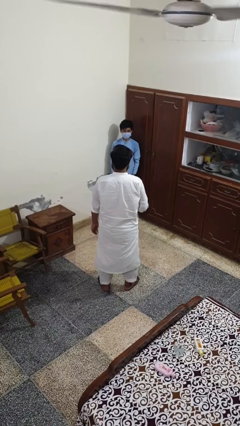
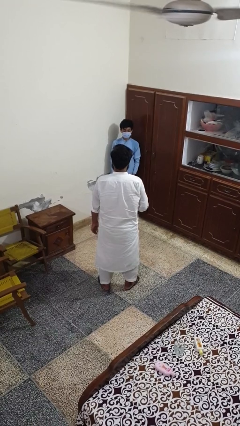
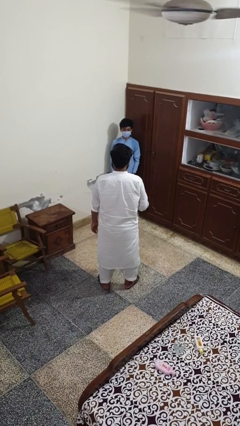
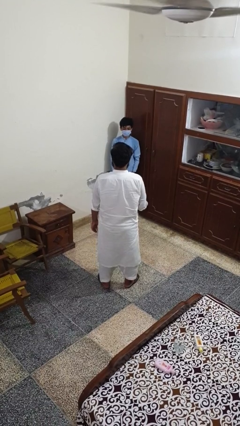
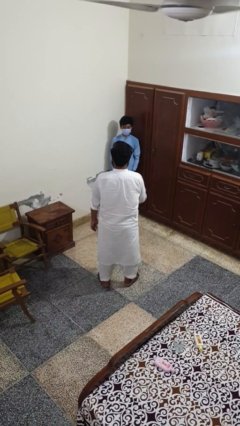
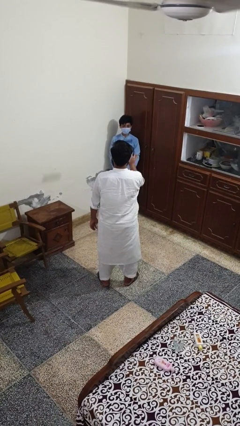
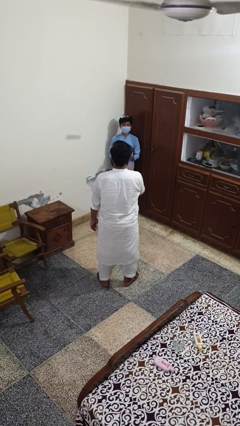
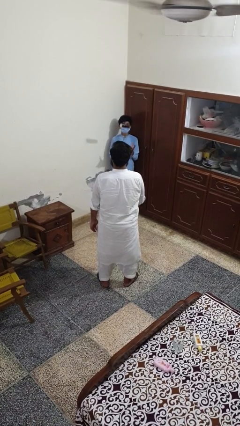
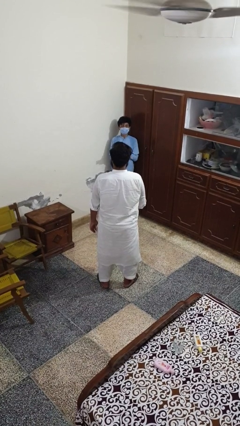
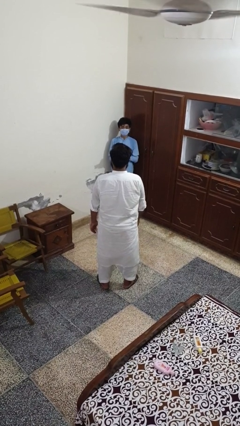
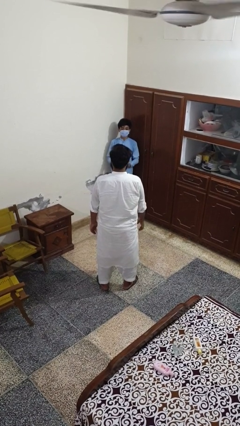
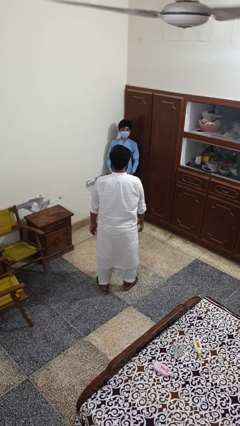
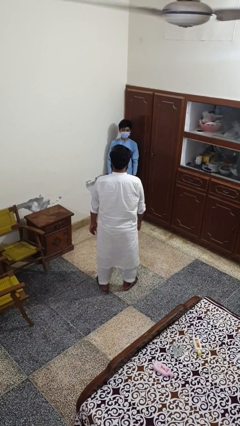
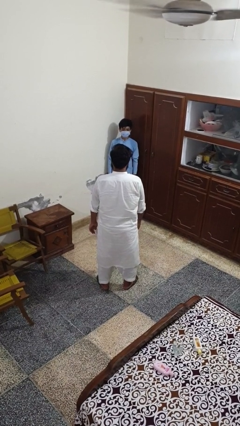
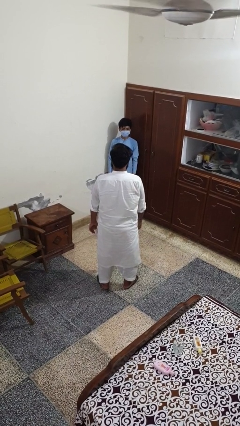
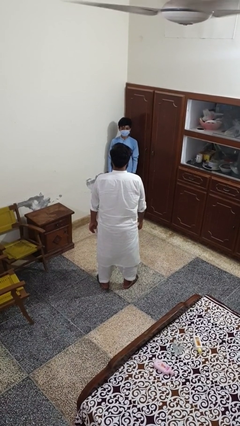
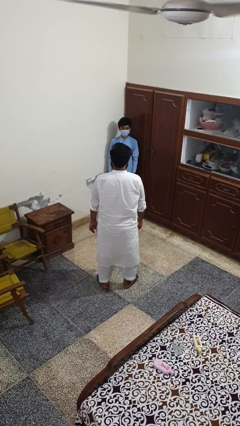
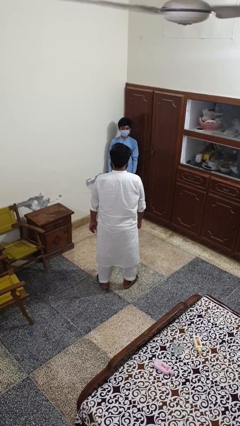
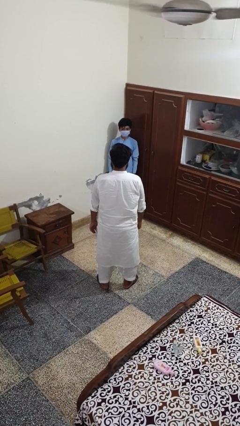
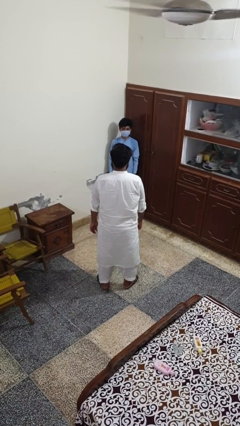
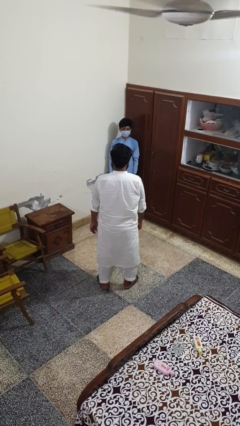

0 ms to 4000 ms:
person throws object to person

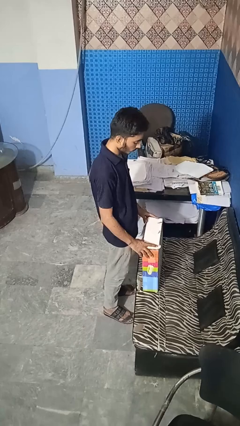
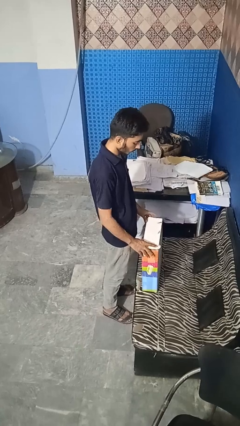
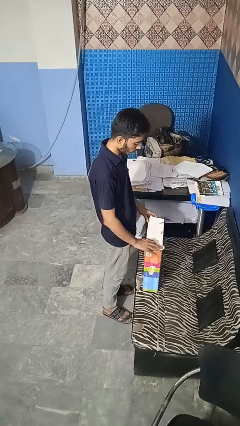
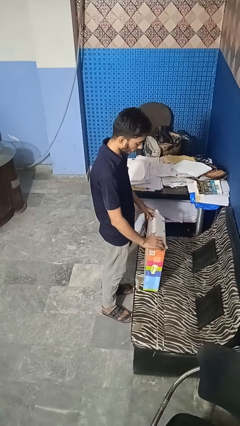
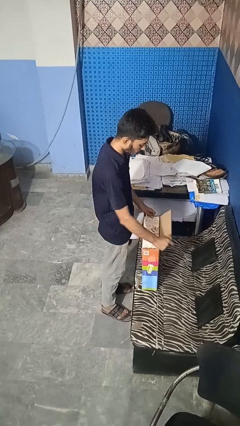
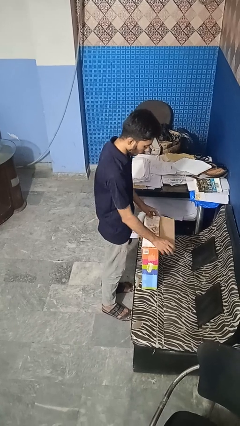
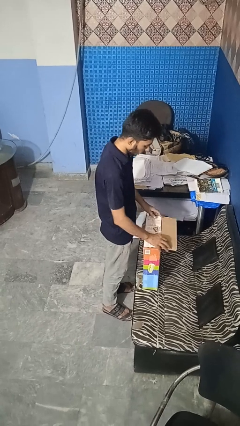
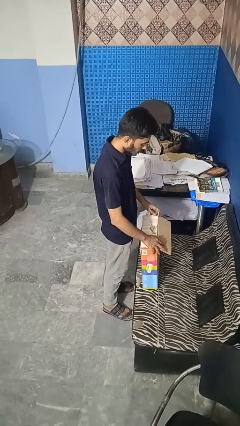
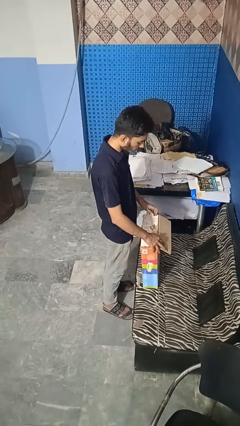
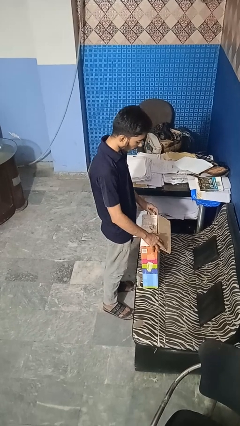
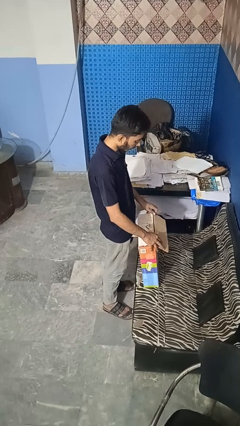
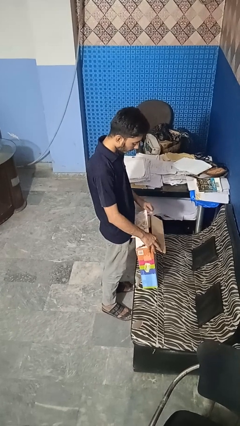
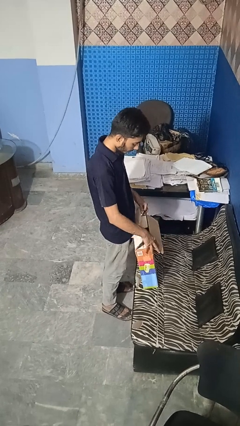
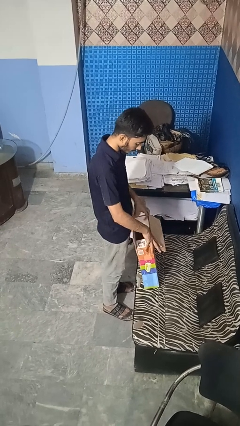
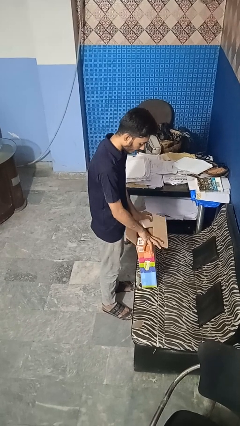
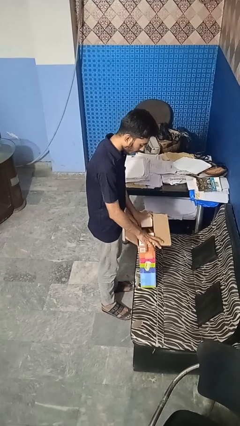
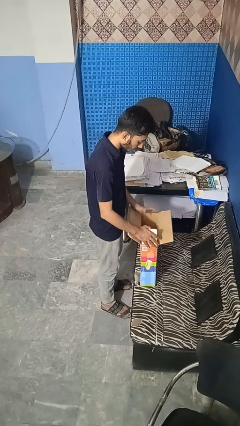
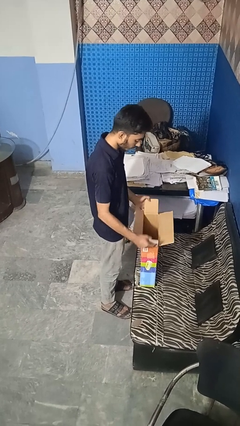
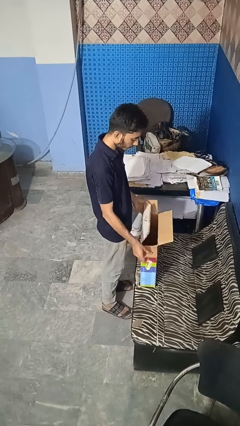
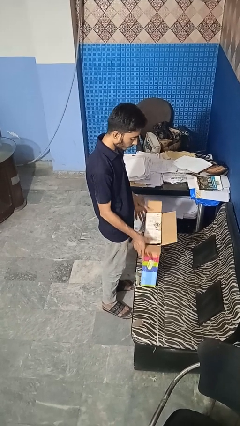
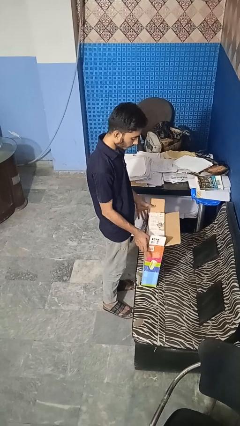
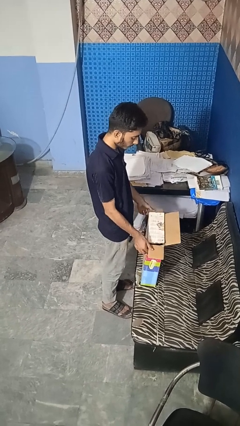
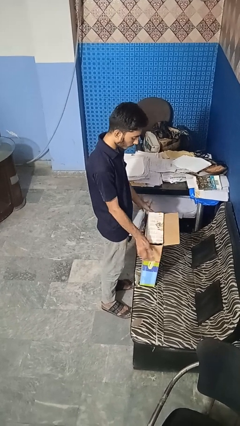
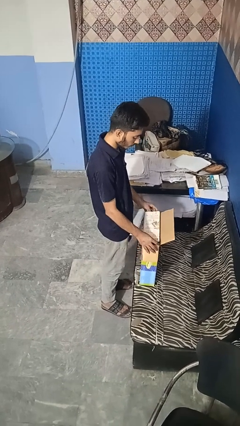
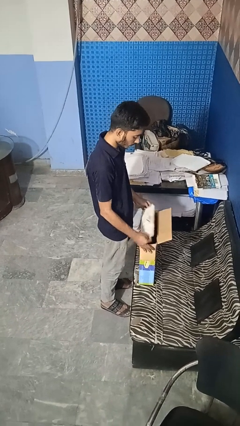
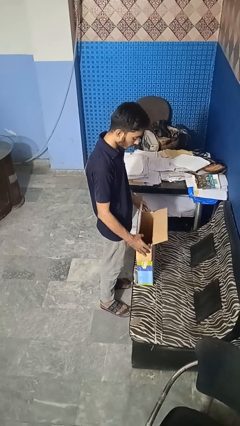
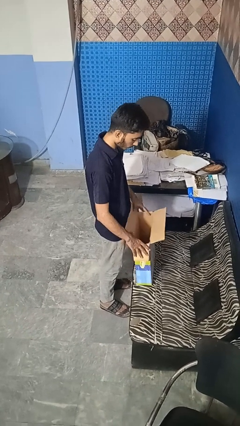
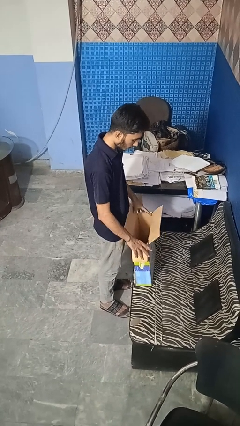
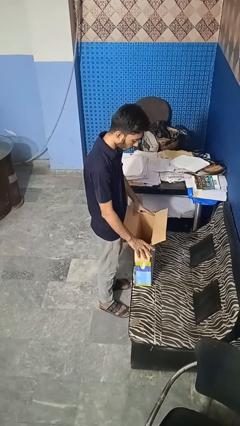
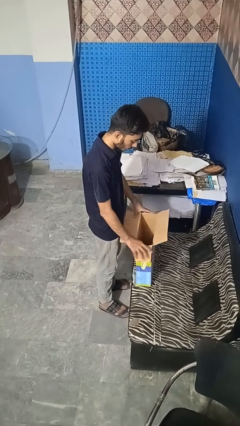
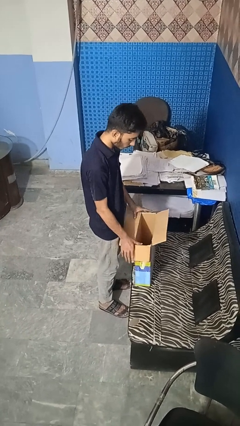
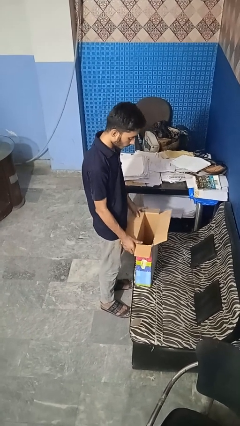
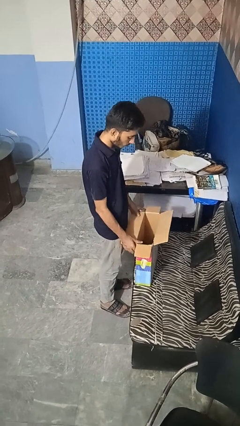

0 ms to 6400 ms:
person opens box

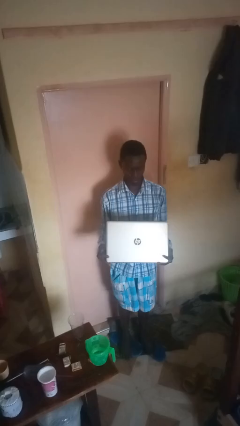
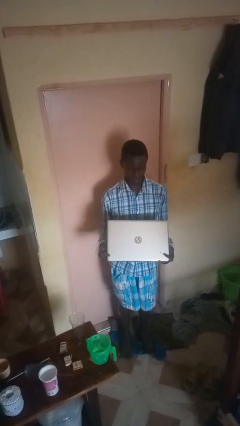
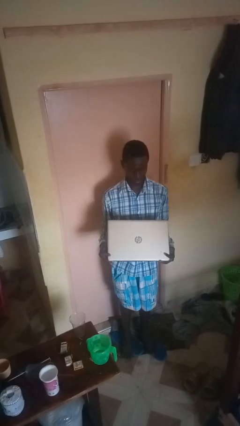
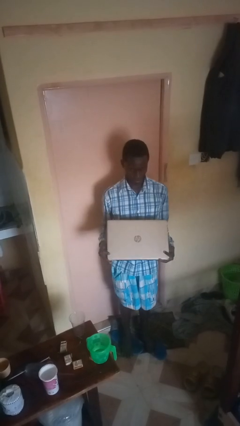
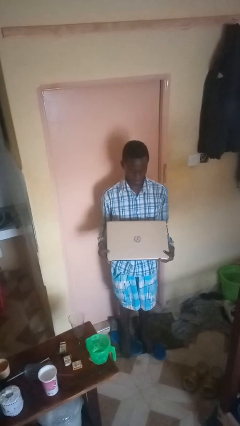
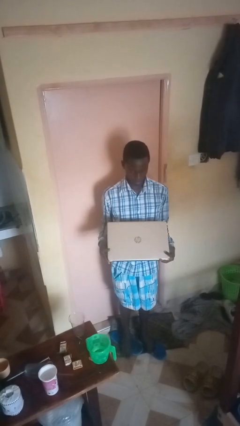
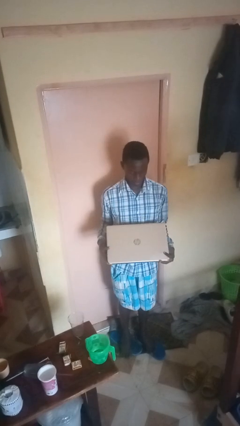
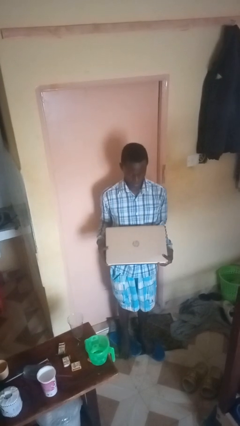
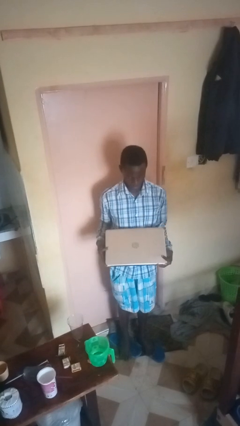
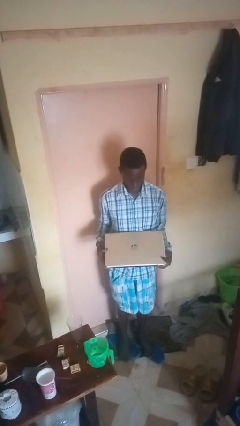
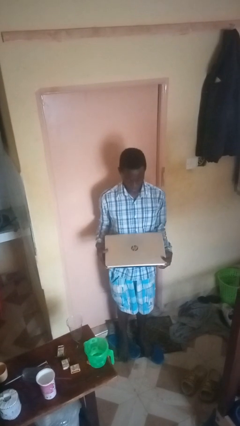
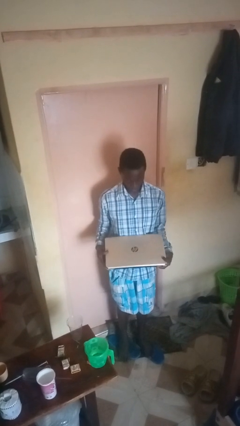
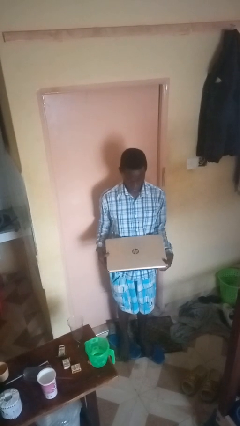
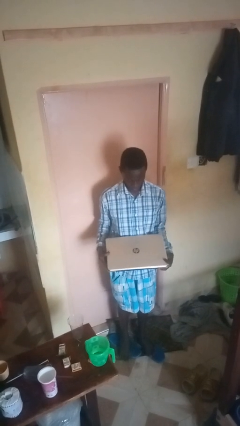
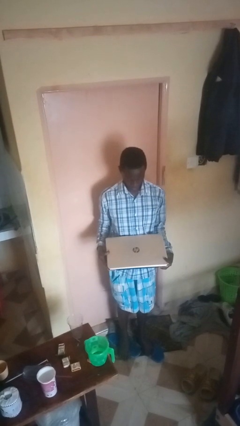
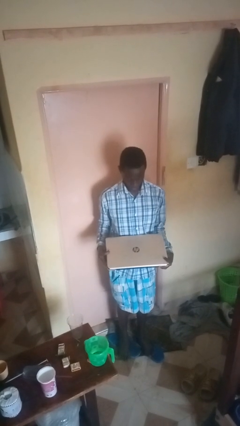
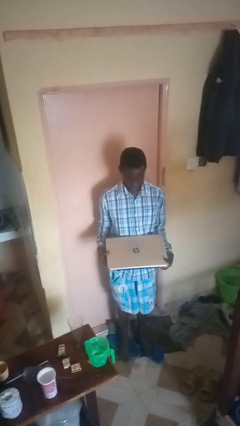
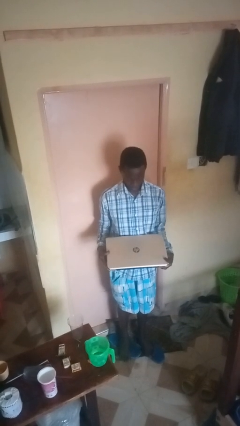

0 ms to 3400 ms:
person closes laptop

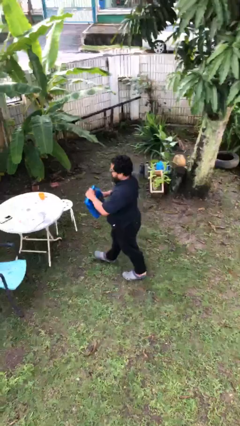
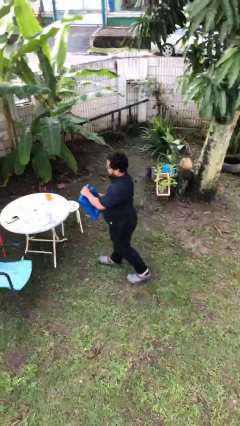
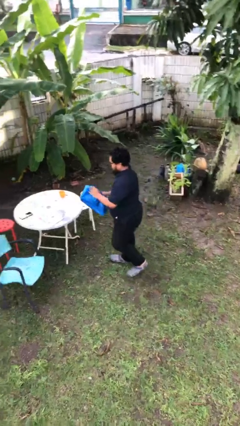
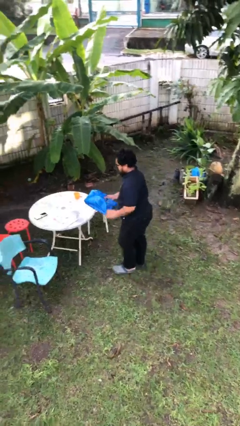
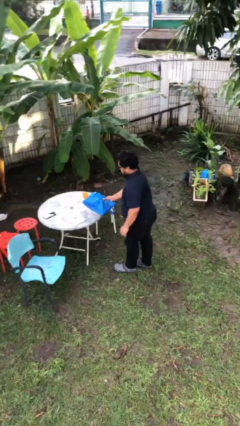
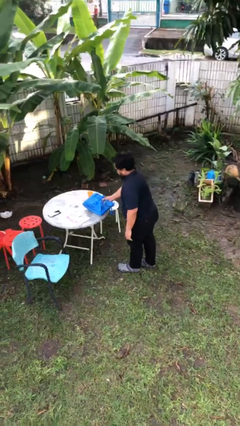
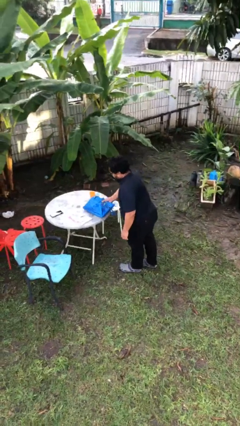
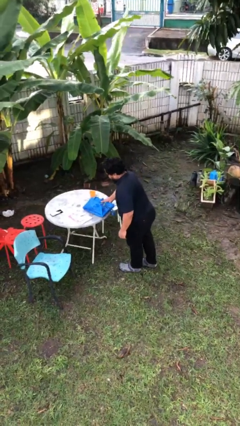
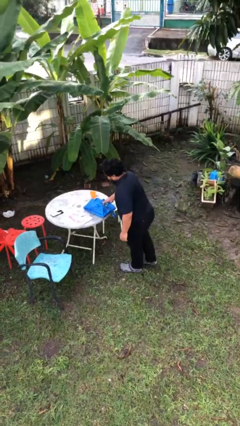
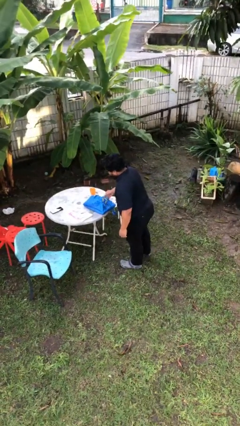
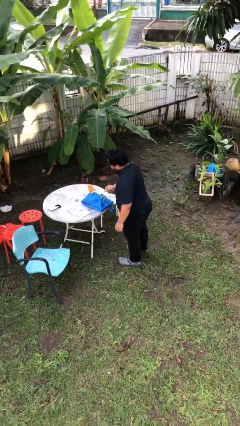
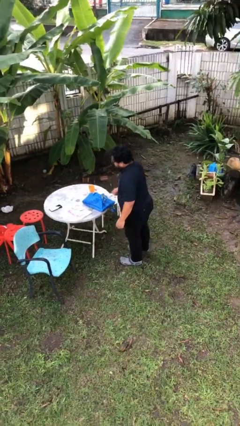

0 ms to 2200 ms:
person puts down object on table

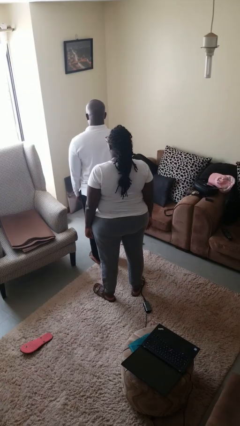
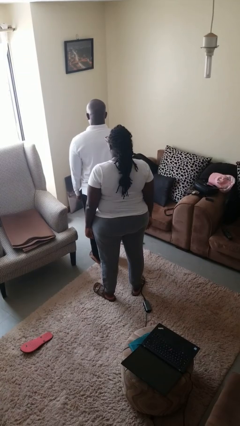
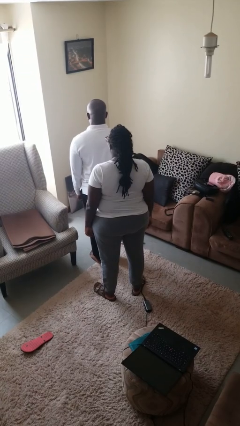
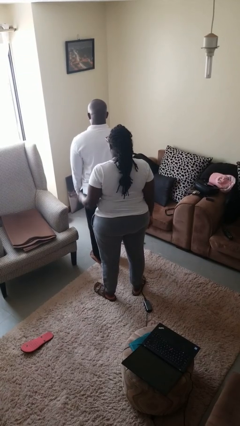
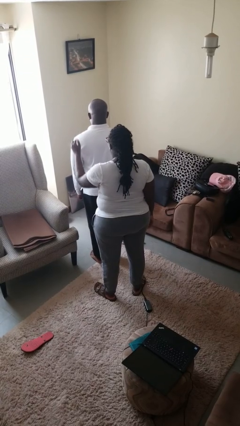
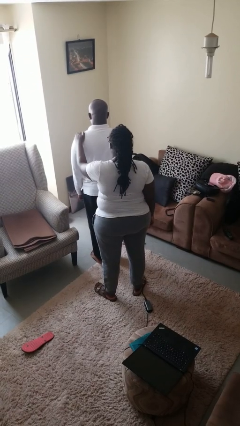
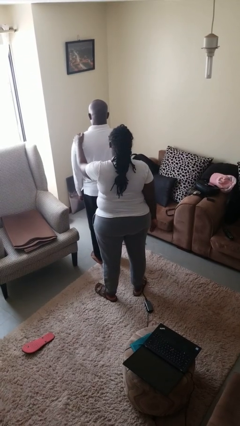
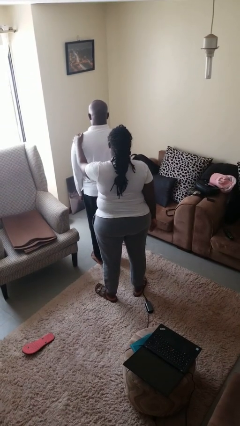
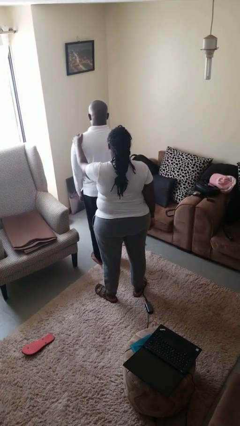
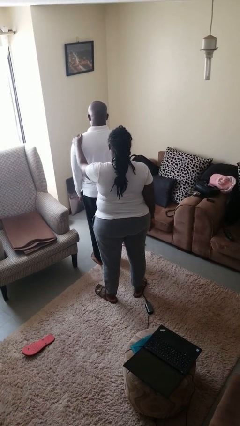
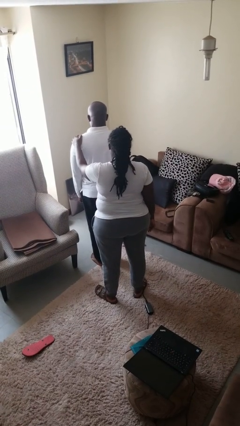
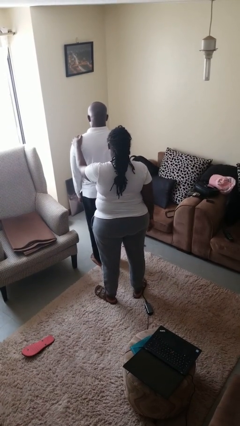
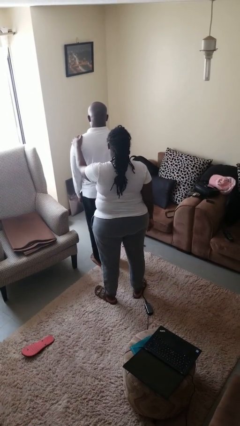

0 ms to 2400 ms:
person grabs person by shoulder
